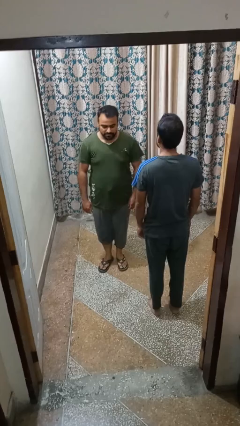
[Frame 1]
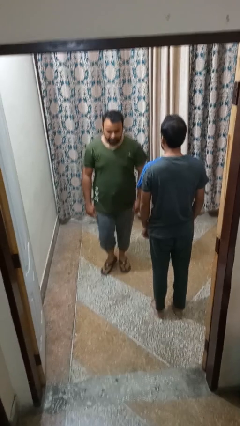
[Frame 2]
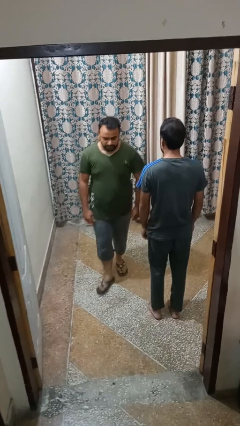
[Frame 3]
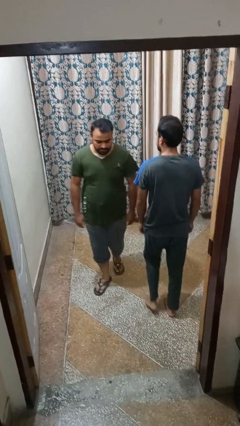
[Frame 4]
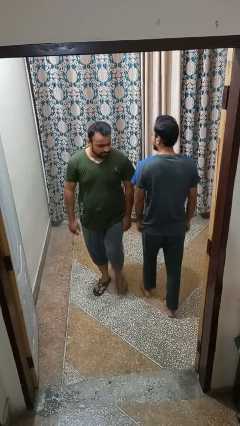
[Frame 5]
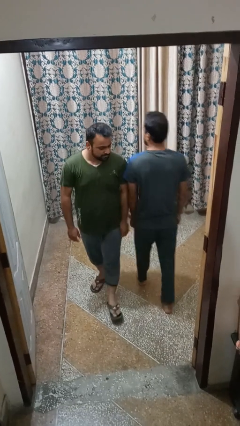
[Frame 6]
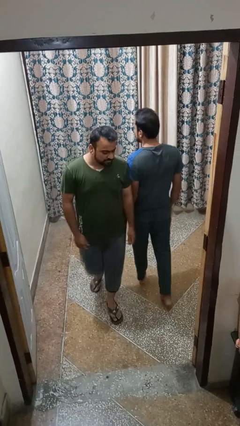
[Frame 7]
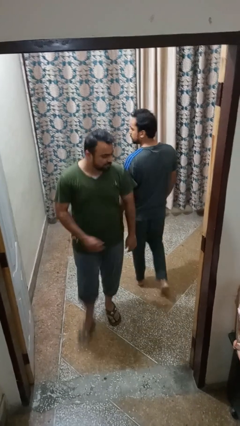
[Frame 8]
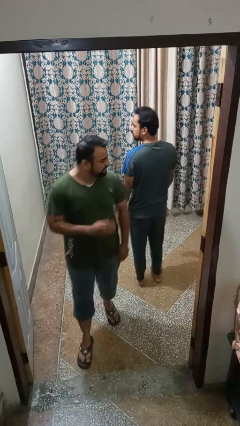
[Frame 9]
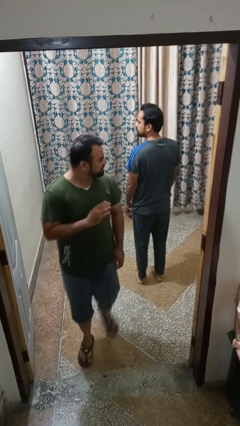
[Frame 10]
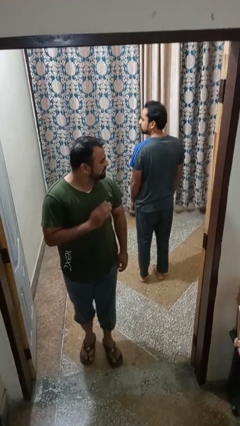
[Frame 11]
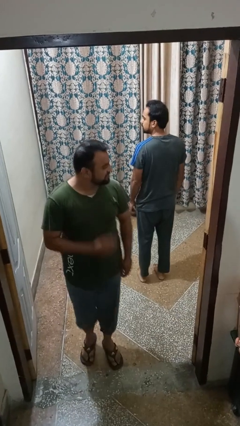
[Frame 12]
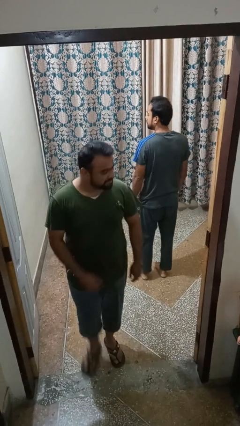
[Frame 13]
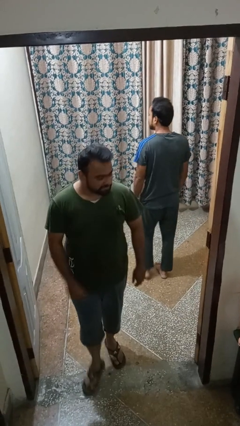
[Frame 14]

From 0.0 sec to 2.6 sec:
person bumps into person

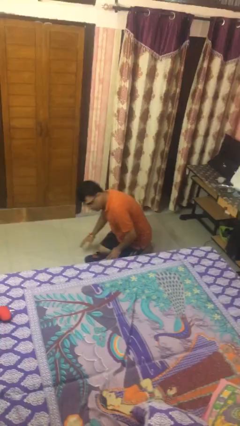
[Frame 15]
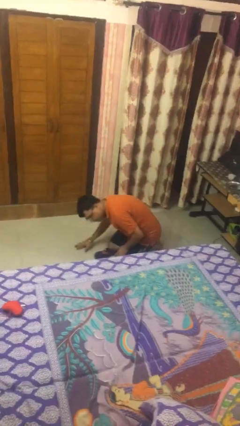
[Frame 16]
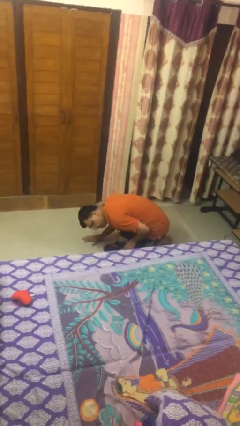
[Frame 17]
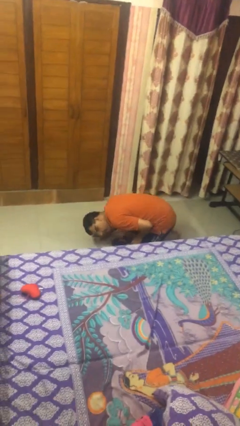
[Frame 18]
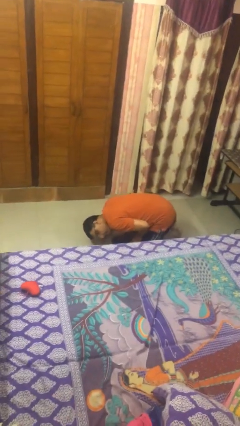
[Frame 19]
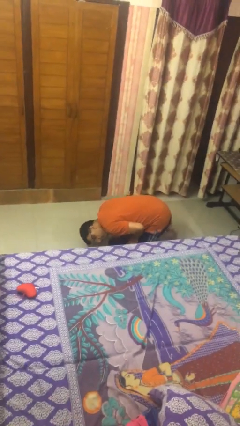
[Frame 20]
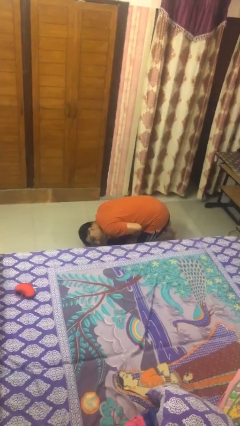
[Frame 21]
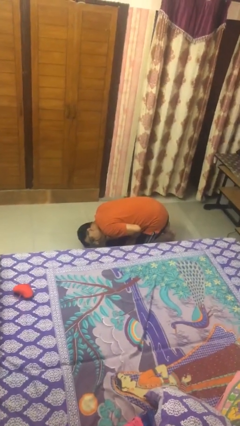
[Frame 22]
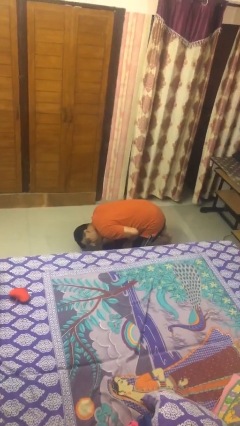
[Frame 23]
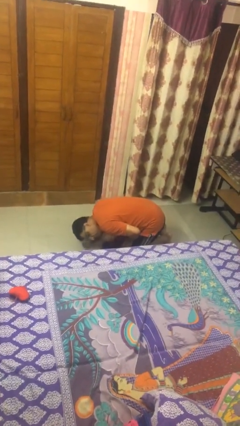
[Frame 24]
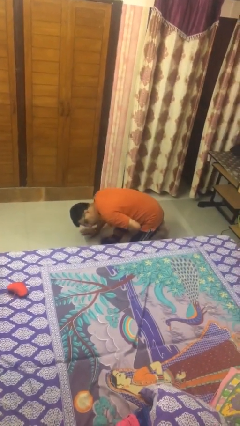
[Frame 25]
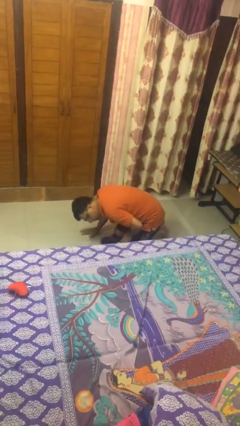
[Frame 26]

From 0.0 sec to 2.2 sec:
person searches under bed

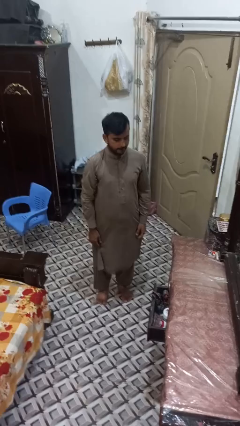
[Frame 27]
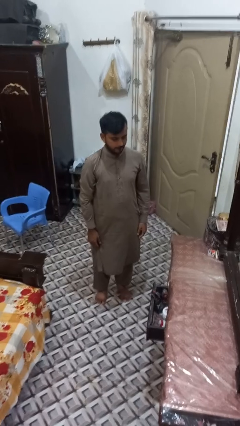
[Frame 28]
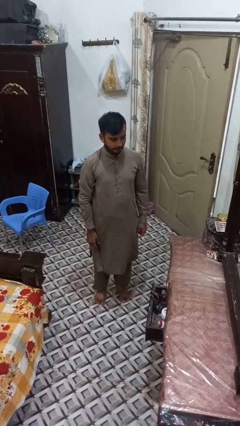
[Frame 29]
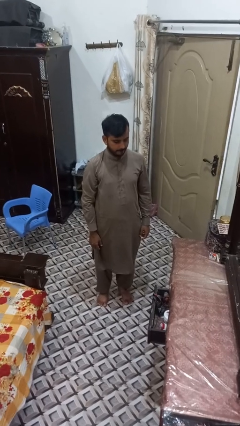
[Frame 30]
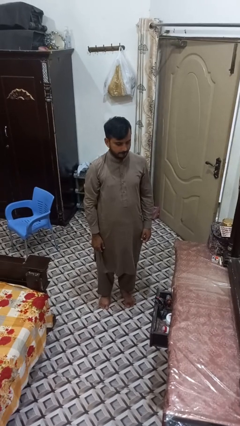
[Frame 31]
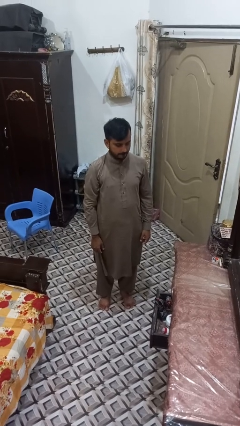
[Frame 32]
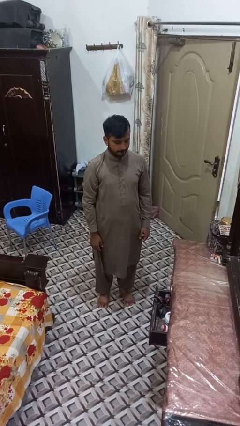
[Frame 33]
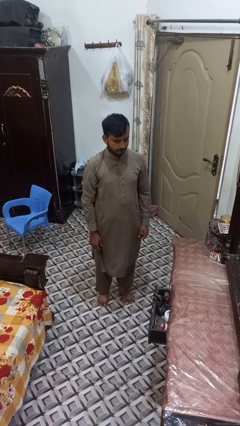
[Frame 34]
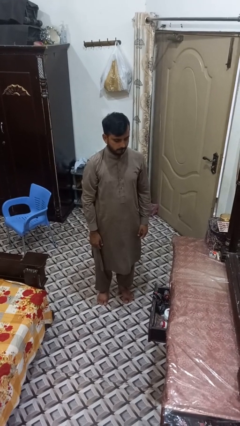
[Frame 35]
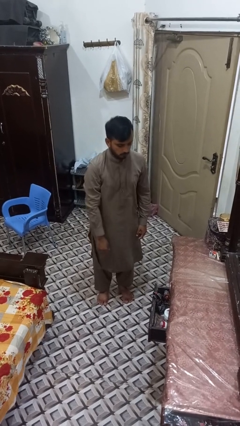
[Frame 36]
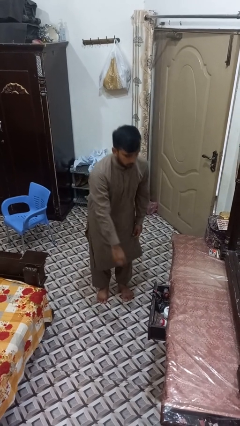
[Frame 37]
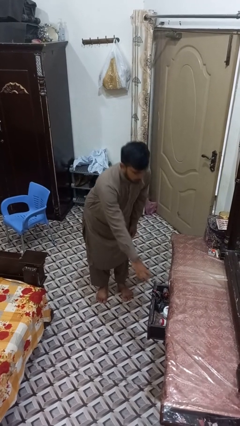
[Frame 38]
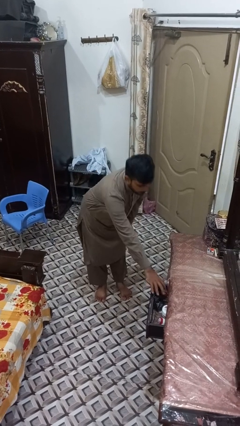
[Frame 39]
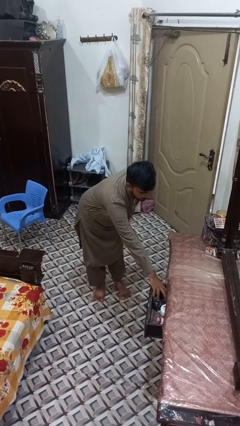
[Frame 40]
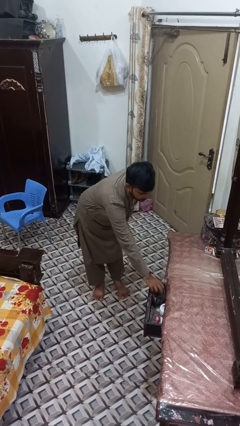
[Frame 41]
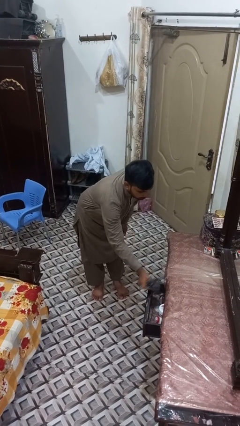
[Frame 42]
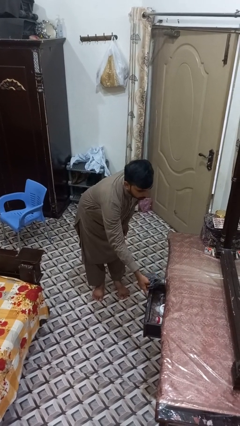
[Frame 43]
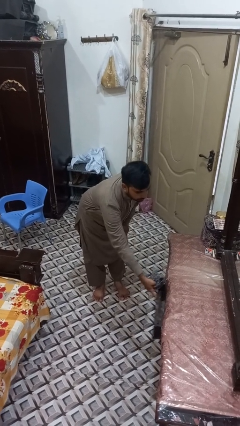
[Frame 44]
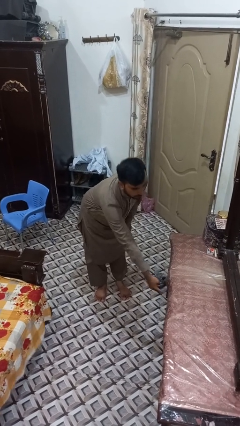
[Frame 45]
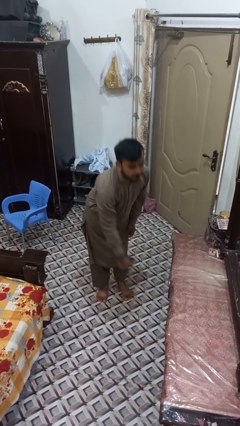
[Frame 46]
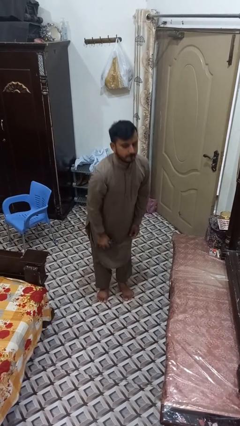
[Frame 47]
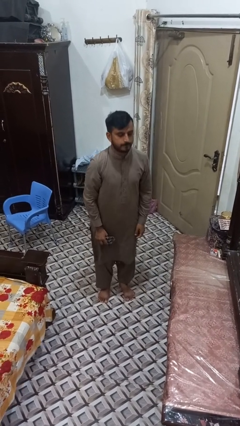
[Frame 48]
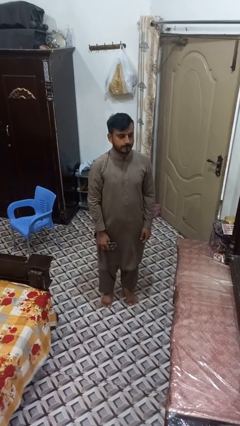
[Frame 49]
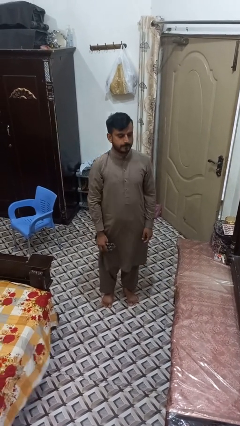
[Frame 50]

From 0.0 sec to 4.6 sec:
person takes clothes from dresser

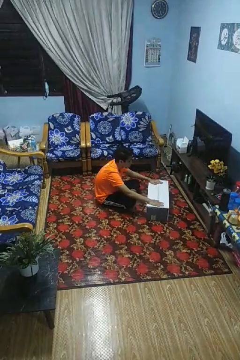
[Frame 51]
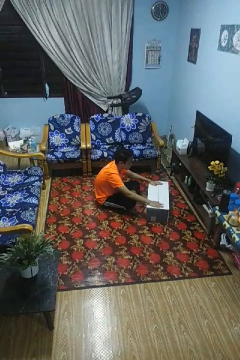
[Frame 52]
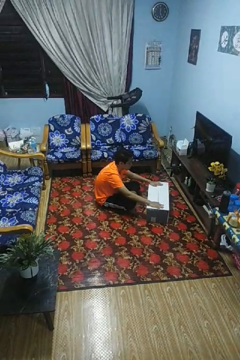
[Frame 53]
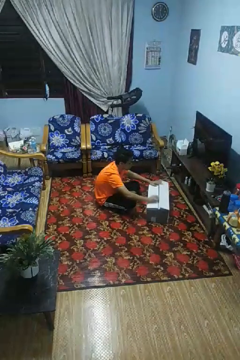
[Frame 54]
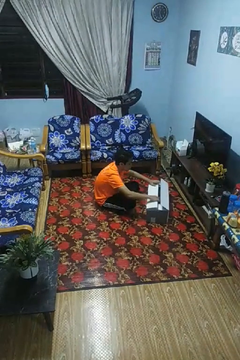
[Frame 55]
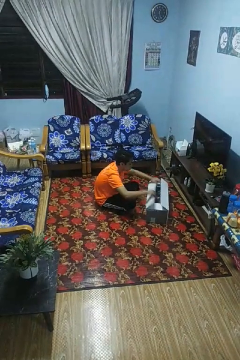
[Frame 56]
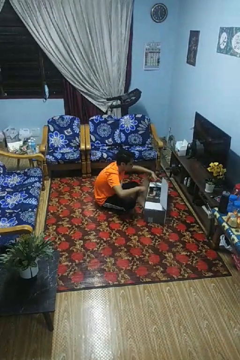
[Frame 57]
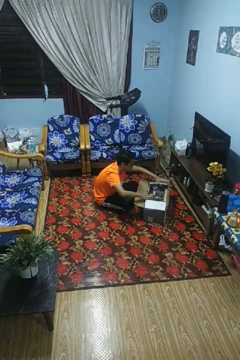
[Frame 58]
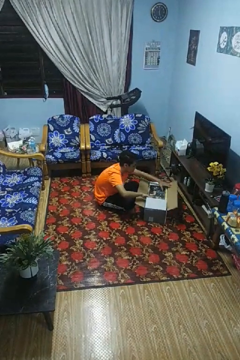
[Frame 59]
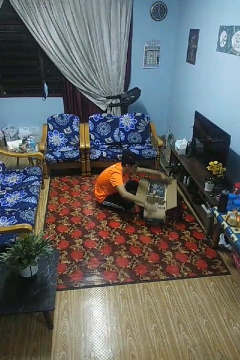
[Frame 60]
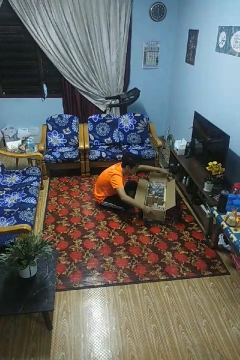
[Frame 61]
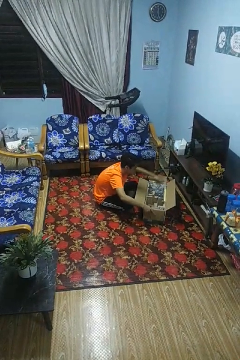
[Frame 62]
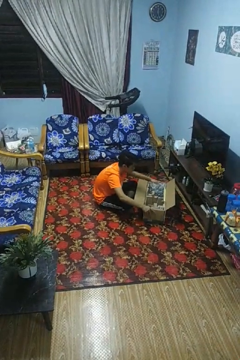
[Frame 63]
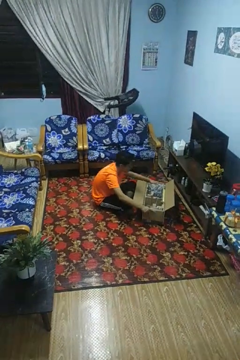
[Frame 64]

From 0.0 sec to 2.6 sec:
person opens box

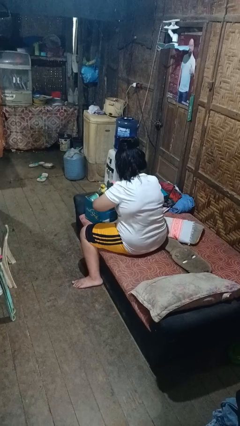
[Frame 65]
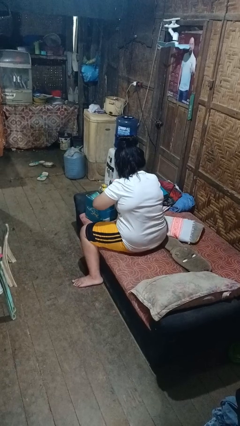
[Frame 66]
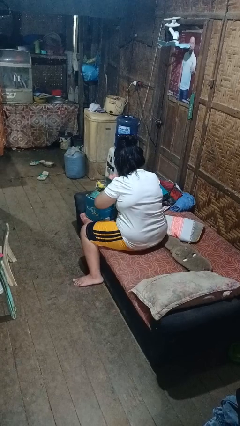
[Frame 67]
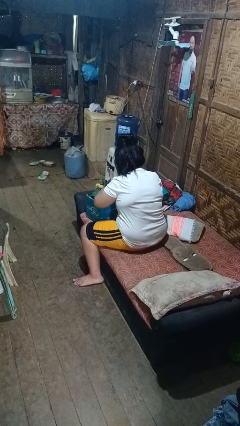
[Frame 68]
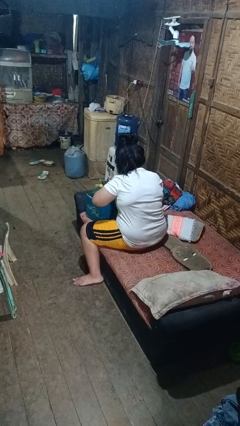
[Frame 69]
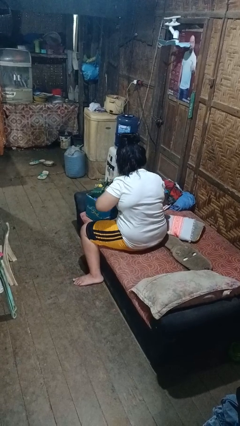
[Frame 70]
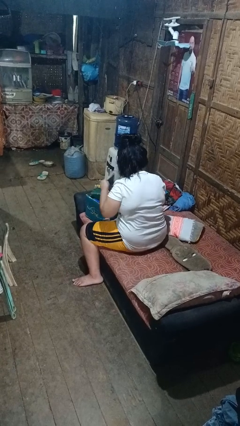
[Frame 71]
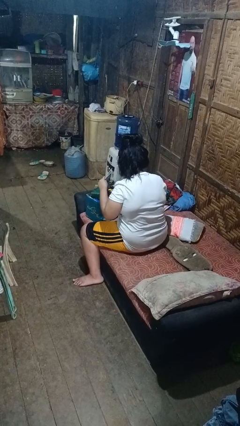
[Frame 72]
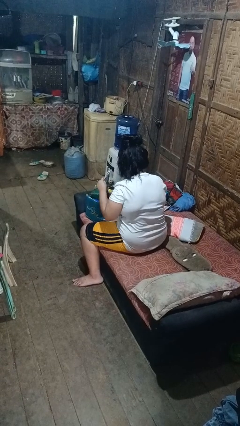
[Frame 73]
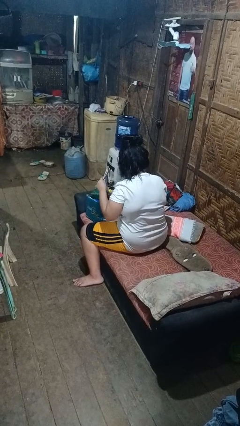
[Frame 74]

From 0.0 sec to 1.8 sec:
person searches in box

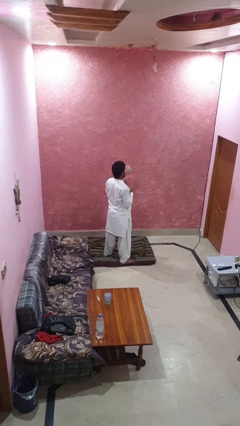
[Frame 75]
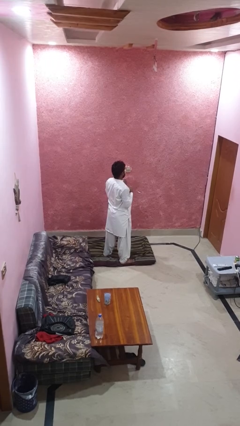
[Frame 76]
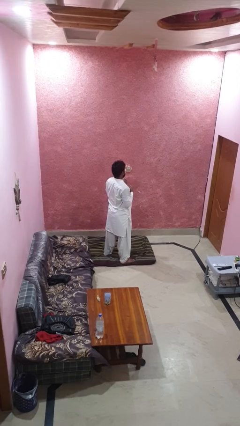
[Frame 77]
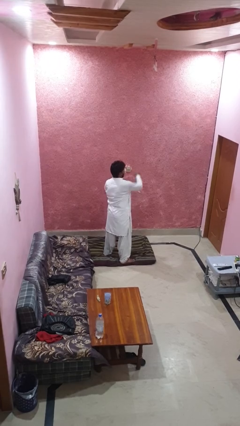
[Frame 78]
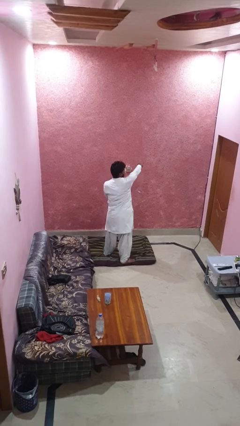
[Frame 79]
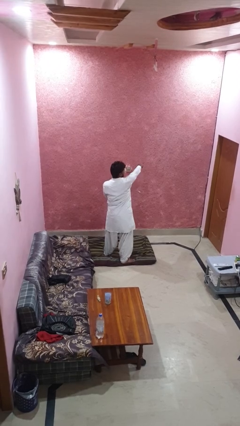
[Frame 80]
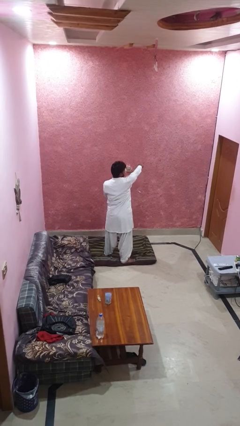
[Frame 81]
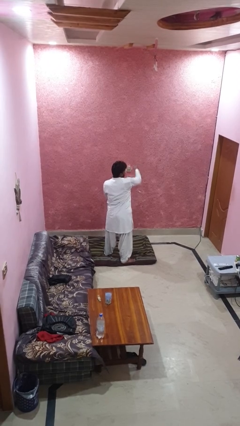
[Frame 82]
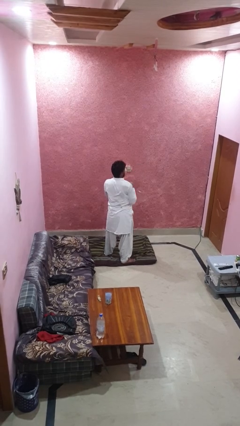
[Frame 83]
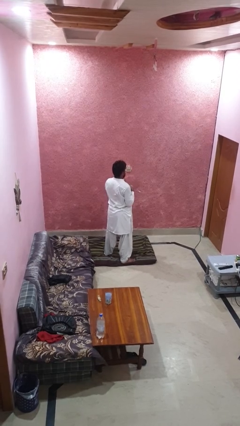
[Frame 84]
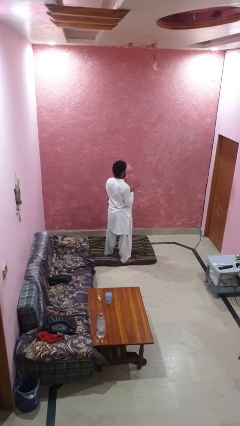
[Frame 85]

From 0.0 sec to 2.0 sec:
person punches

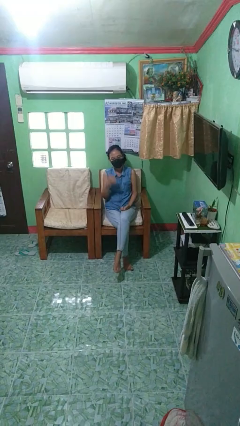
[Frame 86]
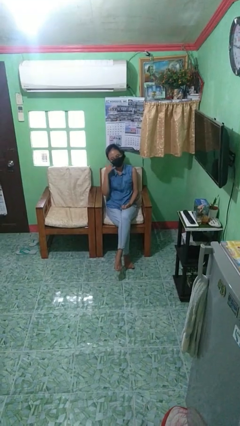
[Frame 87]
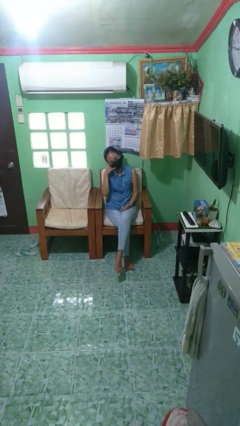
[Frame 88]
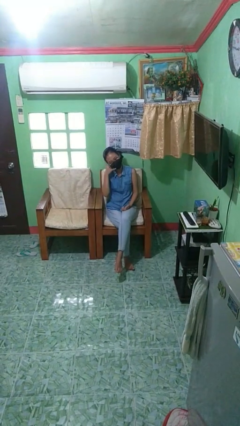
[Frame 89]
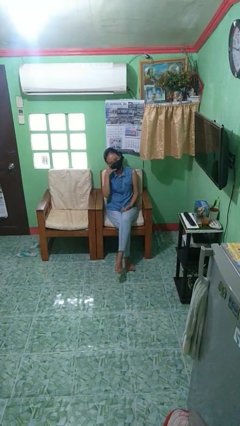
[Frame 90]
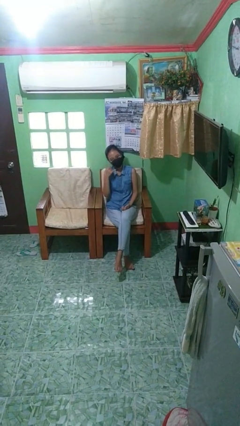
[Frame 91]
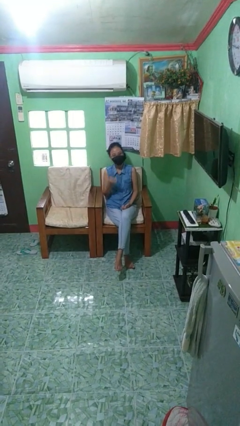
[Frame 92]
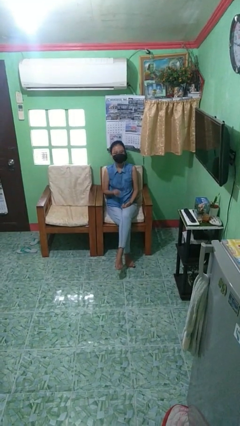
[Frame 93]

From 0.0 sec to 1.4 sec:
person gestures call me

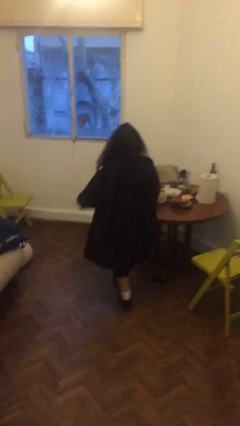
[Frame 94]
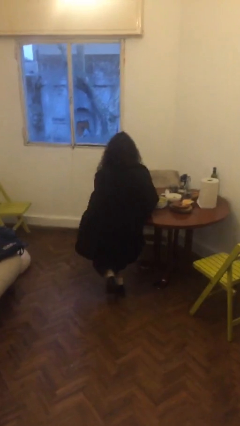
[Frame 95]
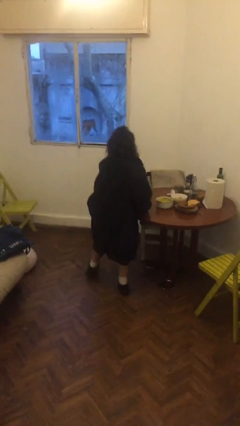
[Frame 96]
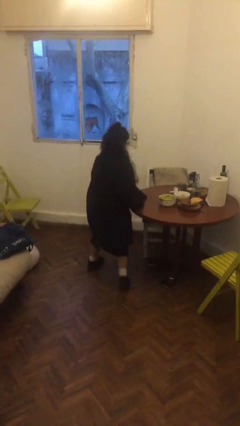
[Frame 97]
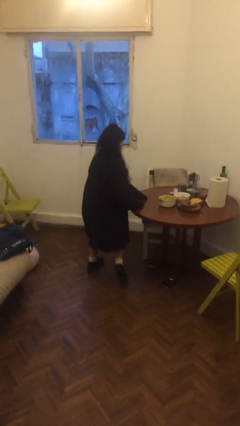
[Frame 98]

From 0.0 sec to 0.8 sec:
person bumps into table
